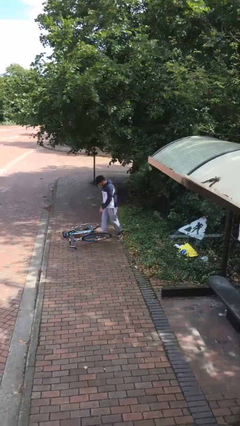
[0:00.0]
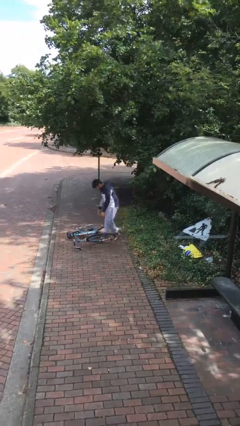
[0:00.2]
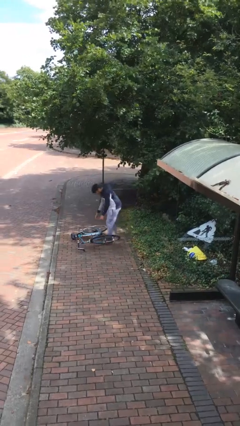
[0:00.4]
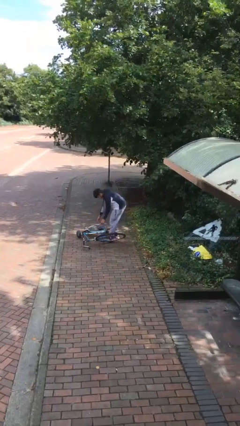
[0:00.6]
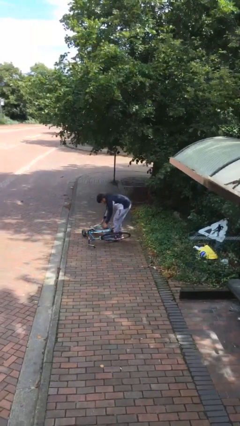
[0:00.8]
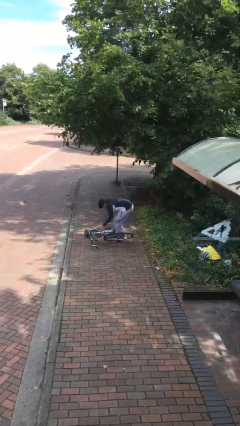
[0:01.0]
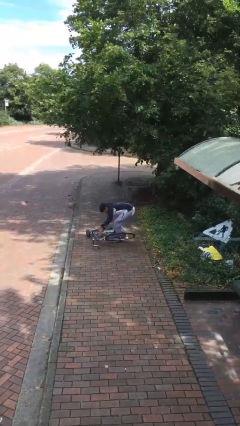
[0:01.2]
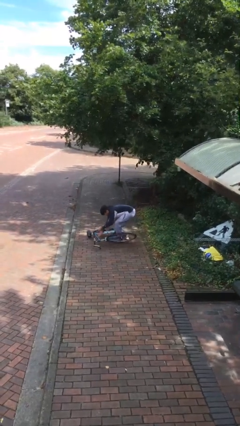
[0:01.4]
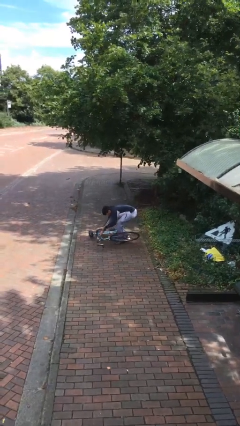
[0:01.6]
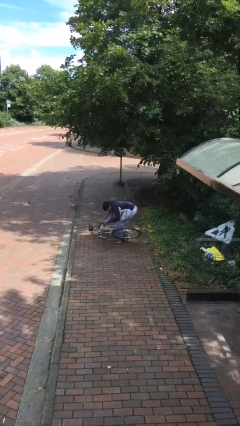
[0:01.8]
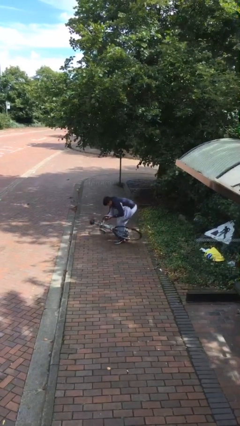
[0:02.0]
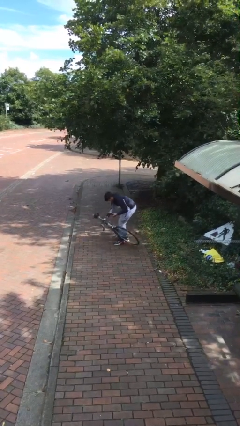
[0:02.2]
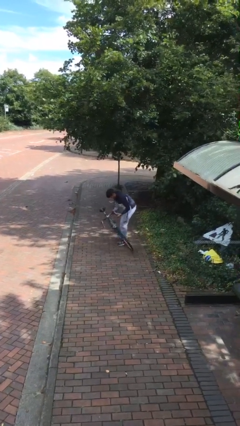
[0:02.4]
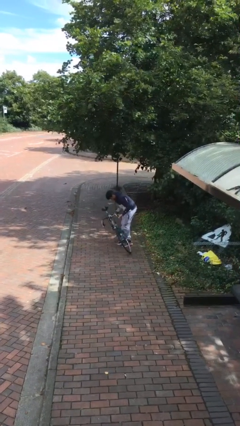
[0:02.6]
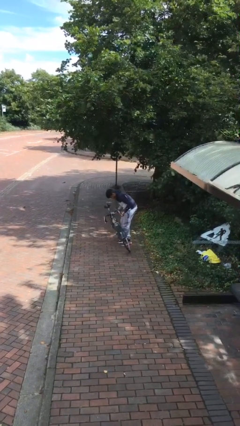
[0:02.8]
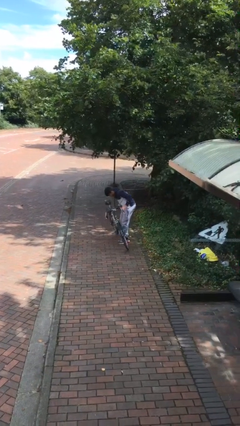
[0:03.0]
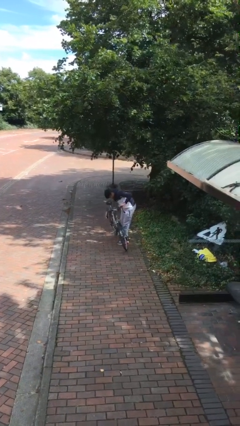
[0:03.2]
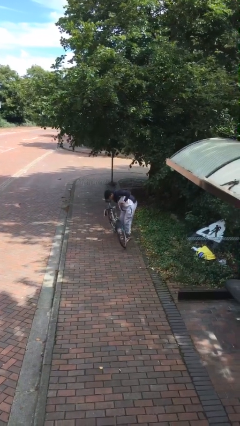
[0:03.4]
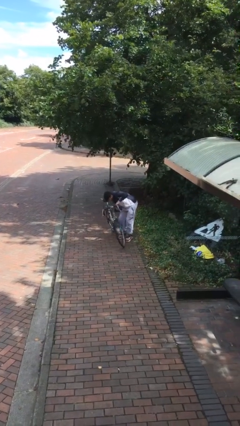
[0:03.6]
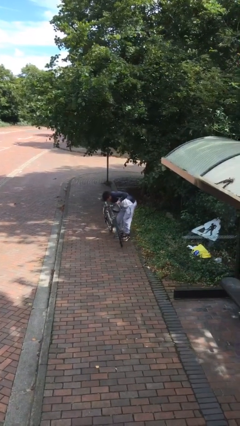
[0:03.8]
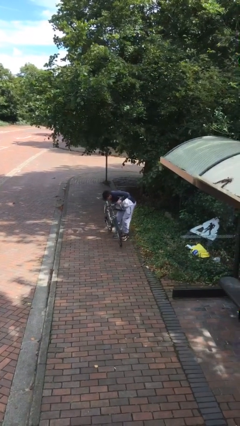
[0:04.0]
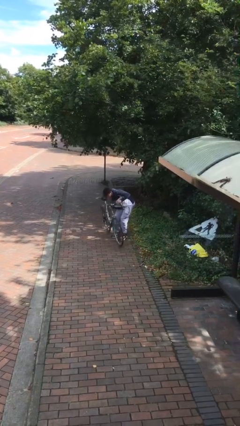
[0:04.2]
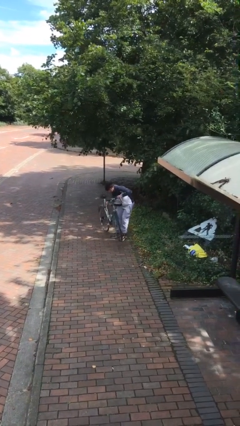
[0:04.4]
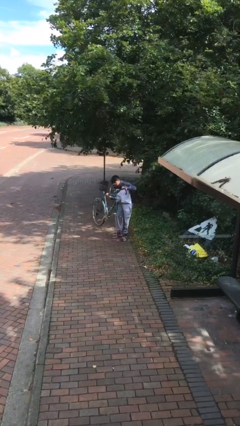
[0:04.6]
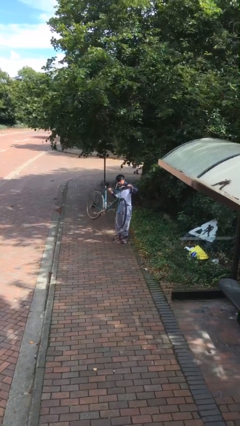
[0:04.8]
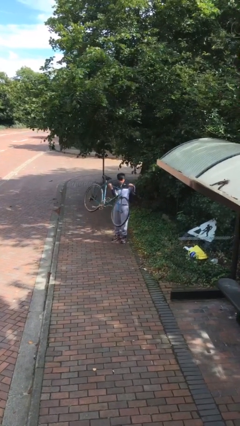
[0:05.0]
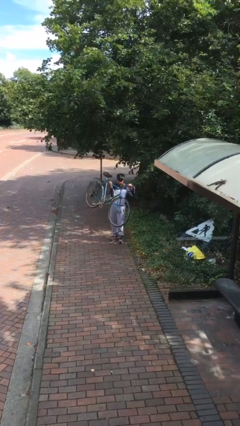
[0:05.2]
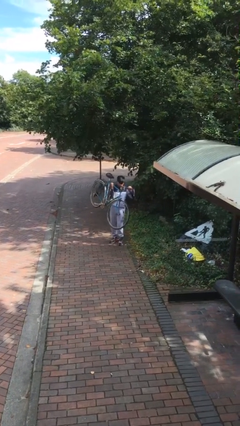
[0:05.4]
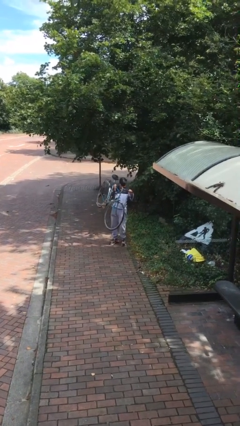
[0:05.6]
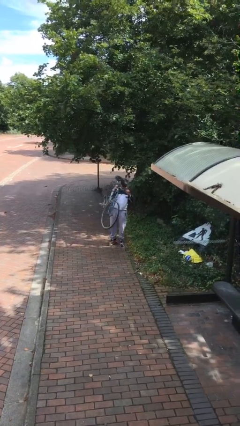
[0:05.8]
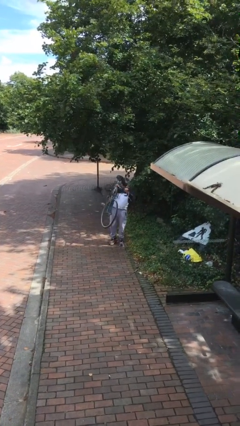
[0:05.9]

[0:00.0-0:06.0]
person picks up object from floor

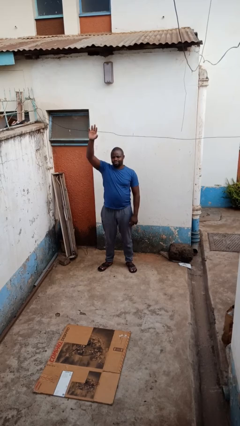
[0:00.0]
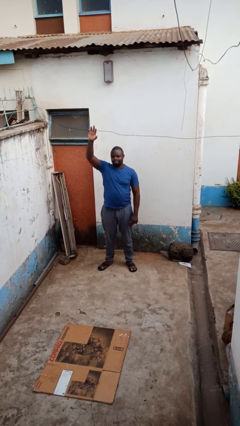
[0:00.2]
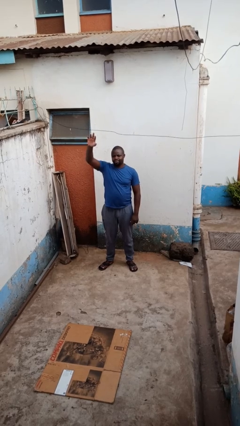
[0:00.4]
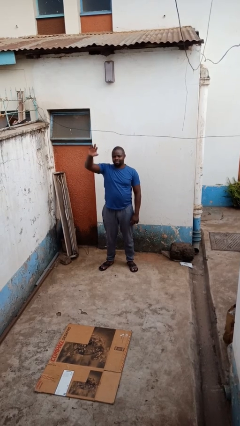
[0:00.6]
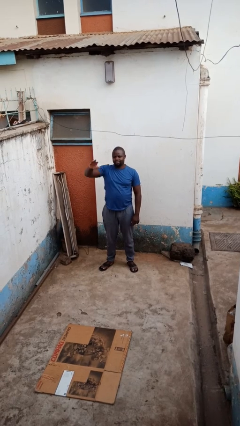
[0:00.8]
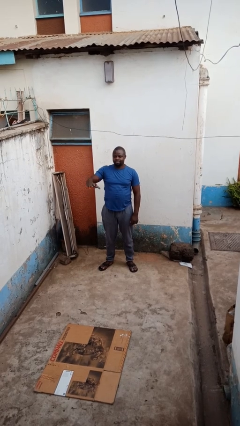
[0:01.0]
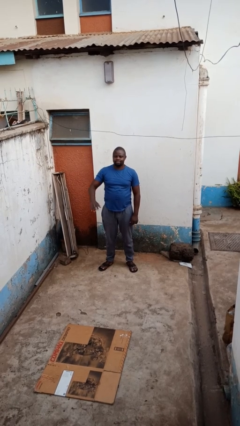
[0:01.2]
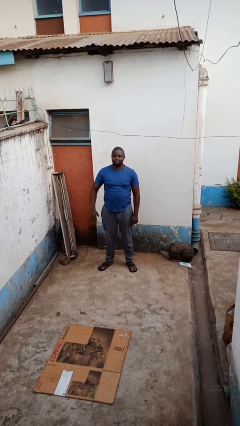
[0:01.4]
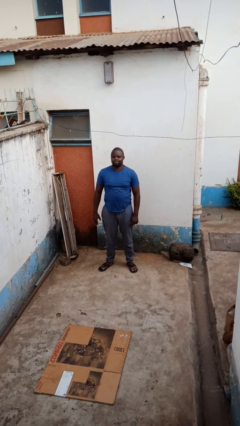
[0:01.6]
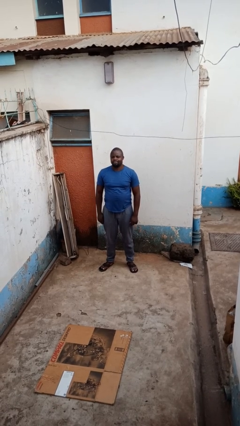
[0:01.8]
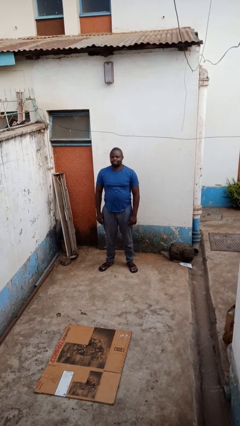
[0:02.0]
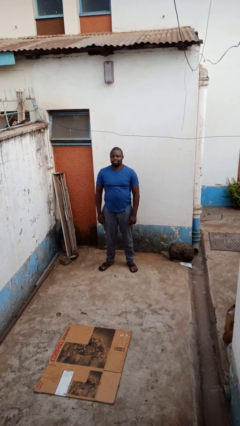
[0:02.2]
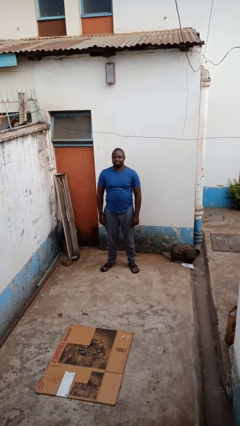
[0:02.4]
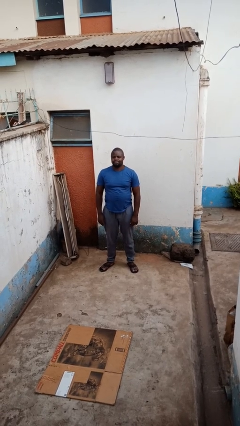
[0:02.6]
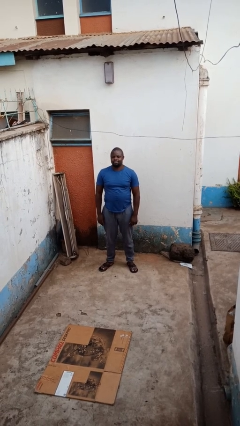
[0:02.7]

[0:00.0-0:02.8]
person gestures lower hand

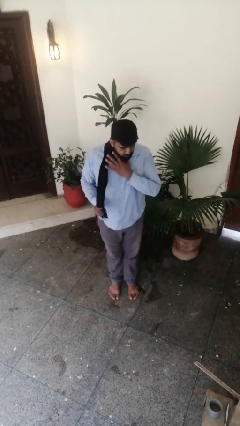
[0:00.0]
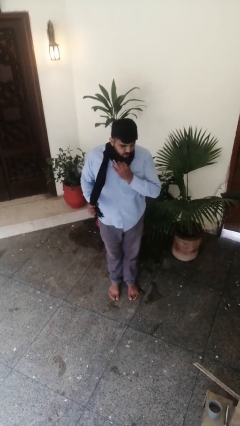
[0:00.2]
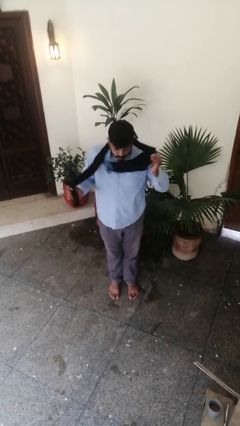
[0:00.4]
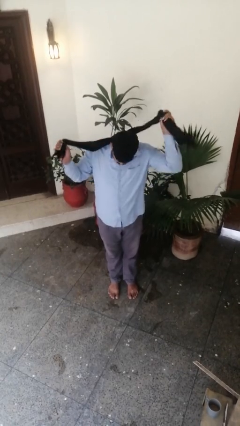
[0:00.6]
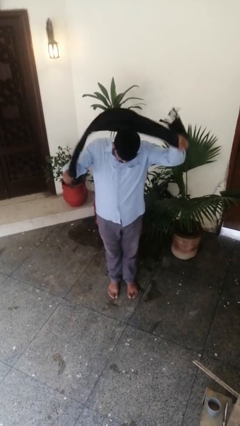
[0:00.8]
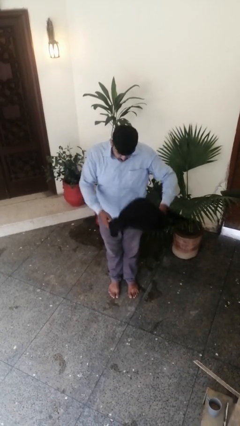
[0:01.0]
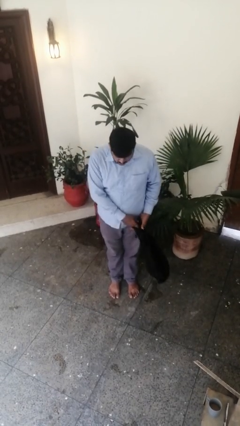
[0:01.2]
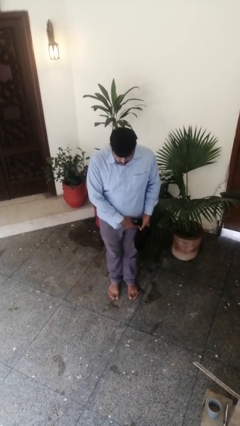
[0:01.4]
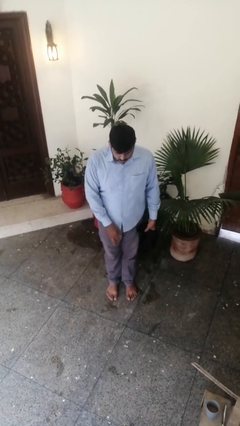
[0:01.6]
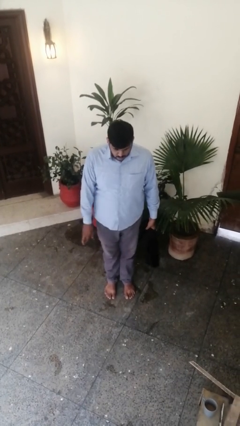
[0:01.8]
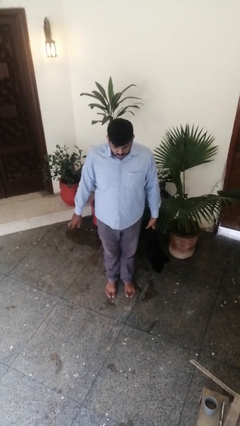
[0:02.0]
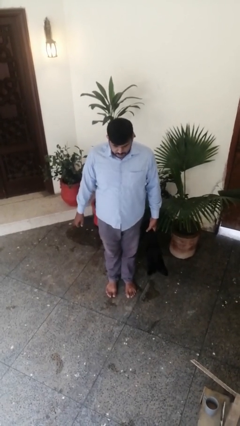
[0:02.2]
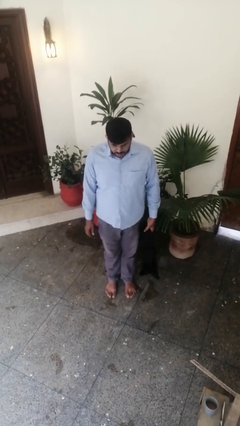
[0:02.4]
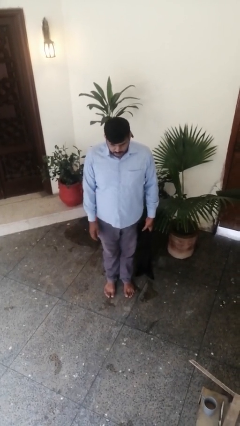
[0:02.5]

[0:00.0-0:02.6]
person takes off scarf

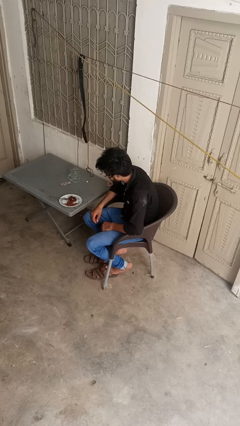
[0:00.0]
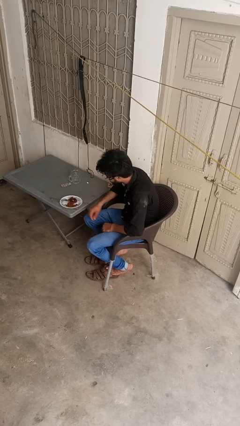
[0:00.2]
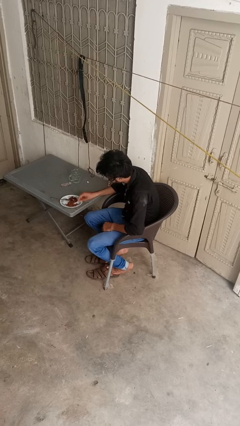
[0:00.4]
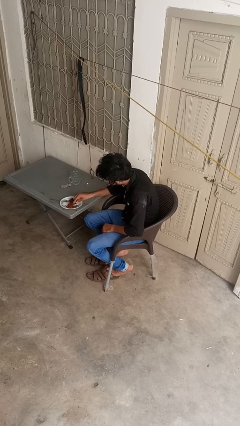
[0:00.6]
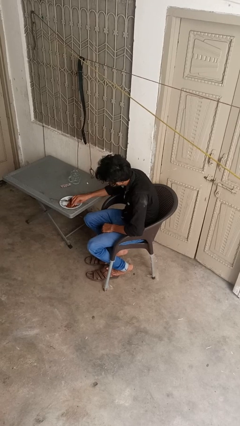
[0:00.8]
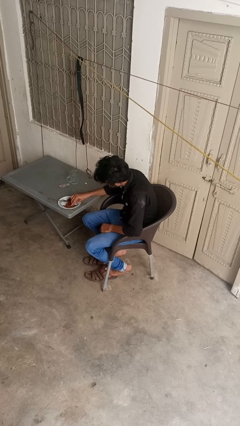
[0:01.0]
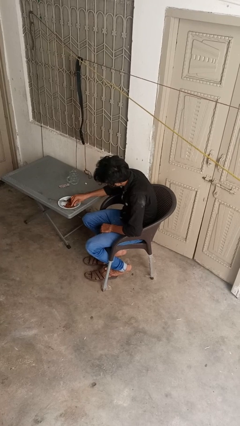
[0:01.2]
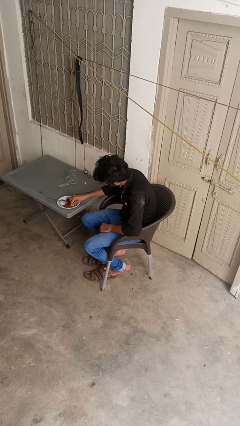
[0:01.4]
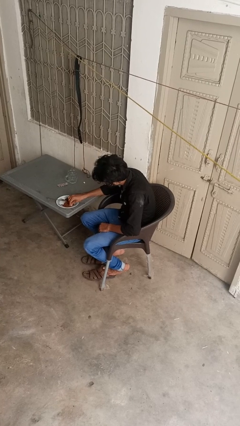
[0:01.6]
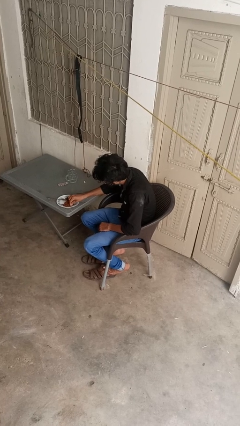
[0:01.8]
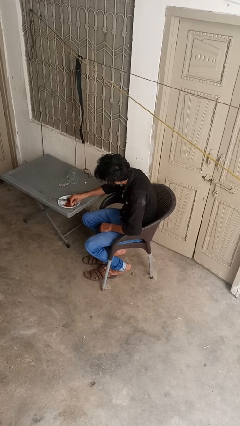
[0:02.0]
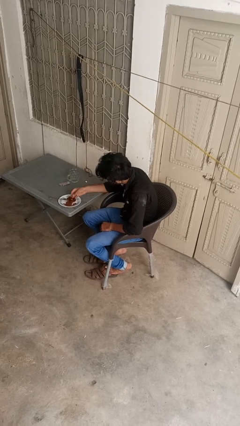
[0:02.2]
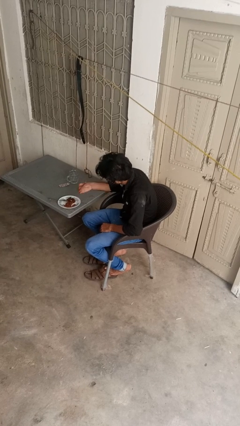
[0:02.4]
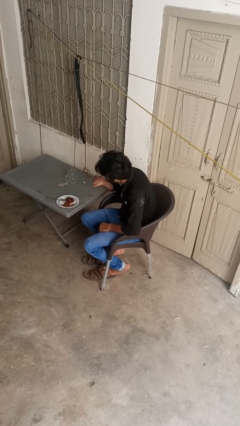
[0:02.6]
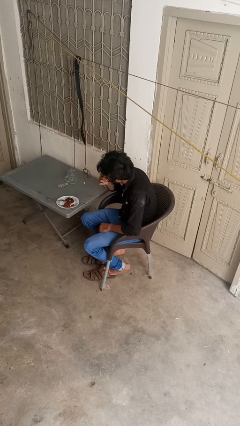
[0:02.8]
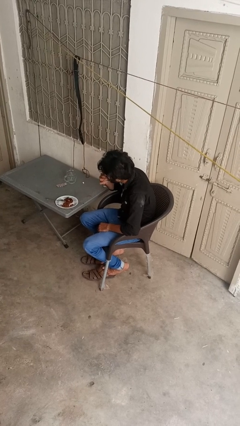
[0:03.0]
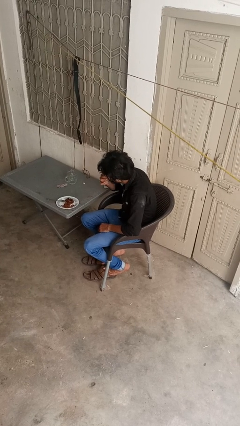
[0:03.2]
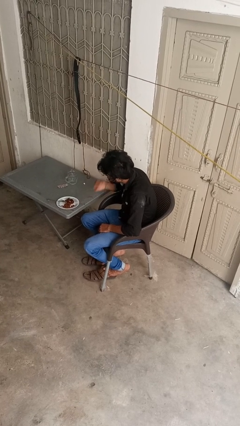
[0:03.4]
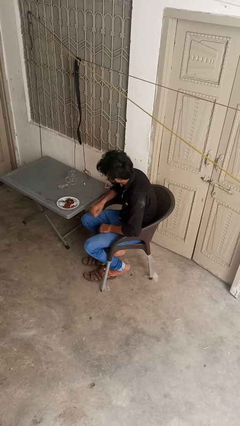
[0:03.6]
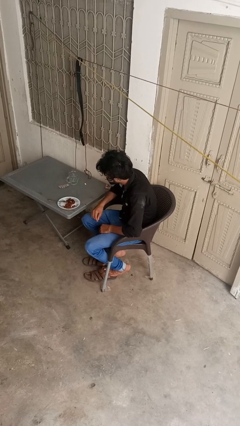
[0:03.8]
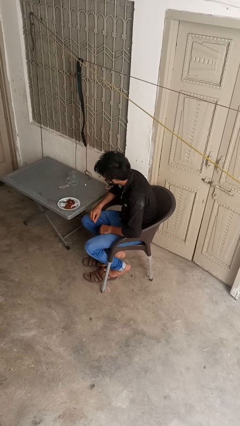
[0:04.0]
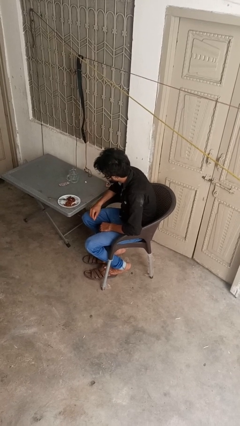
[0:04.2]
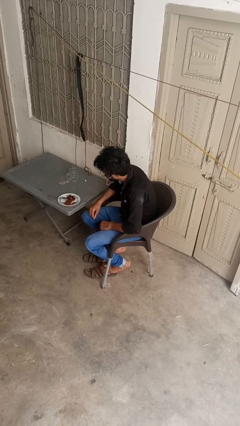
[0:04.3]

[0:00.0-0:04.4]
person eats with hands

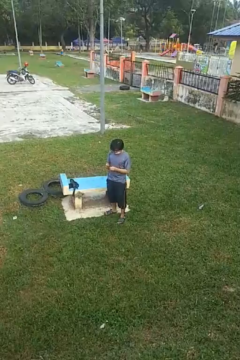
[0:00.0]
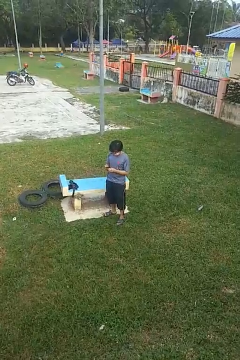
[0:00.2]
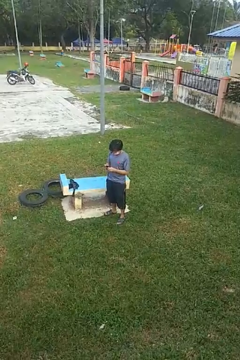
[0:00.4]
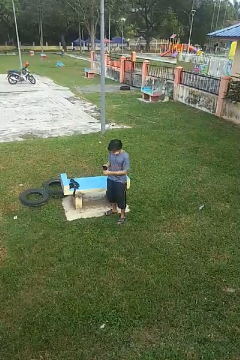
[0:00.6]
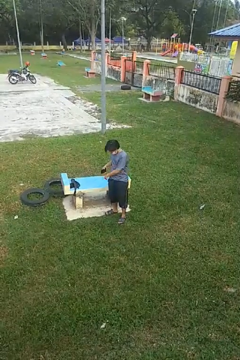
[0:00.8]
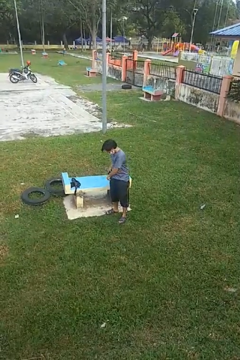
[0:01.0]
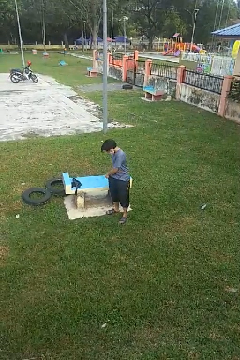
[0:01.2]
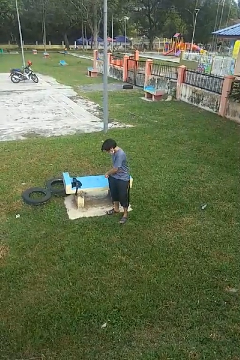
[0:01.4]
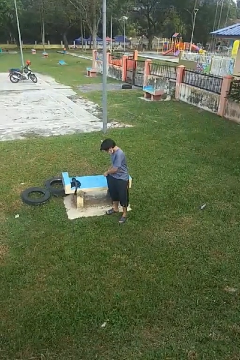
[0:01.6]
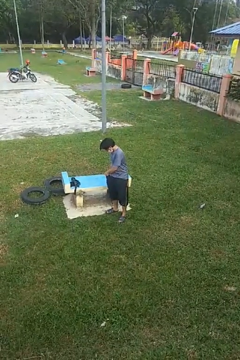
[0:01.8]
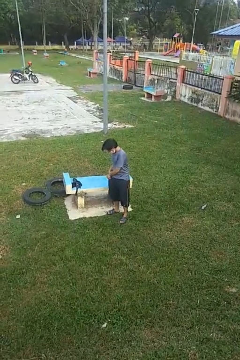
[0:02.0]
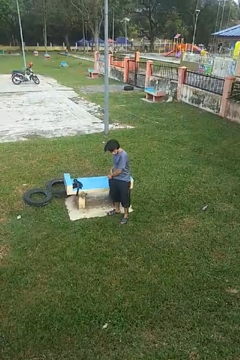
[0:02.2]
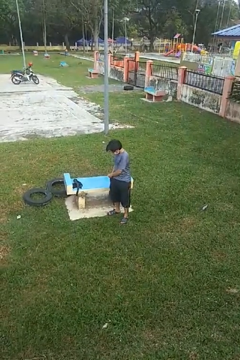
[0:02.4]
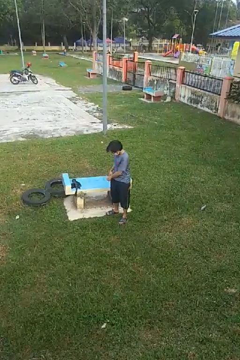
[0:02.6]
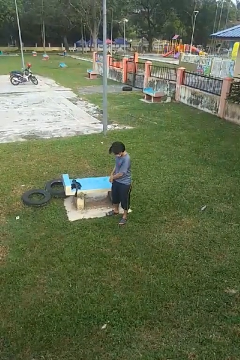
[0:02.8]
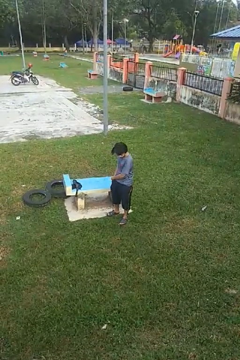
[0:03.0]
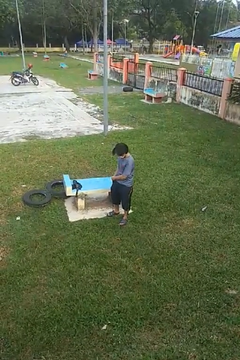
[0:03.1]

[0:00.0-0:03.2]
person puts phone into pocket
